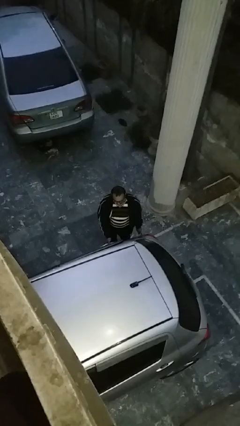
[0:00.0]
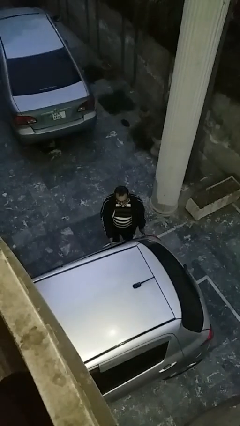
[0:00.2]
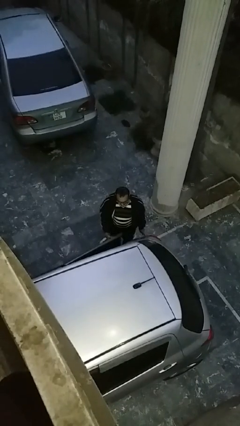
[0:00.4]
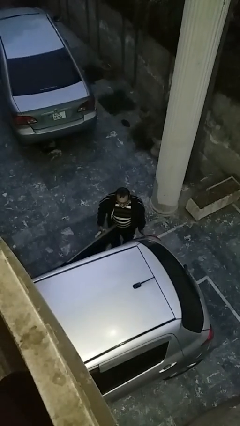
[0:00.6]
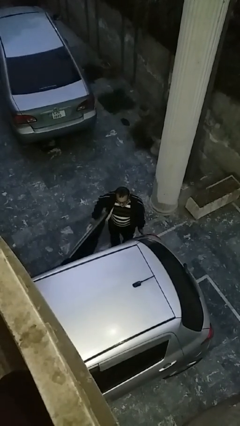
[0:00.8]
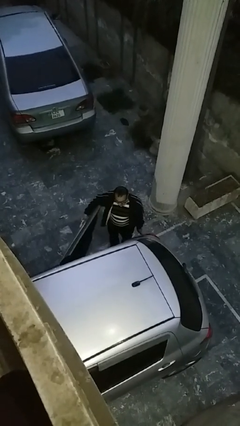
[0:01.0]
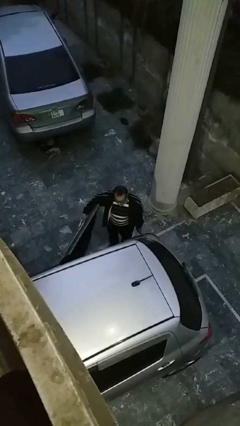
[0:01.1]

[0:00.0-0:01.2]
person opens car door

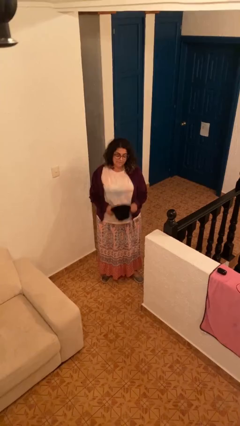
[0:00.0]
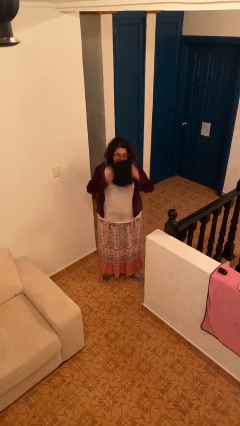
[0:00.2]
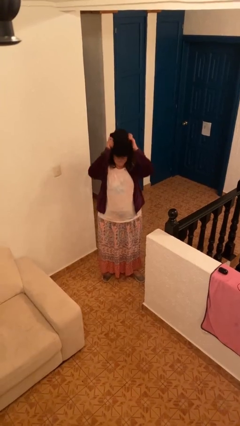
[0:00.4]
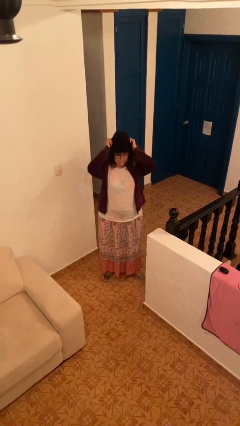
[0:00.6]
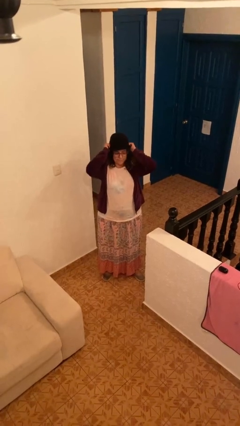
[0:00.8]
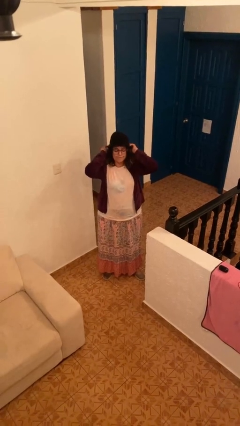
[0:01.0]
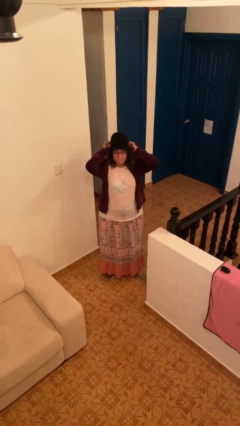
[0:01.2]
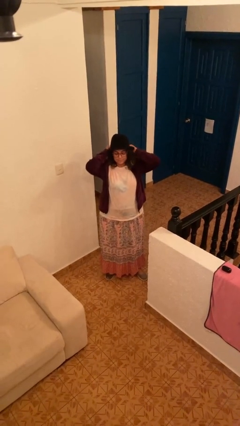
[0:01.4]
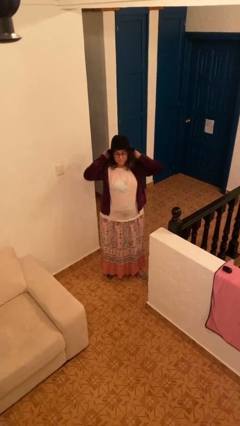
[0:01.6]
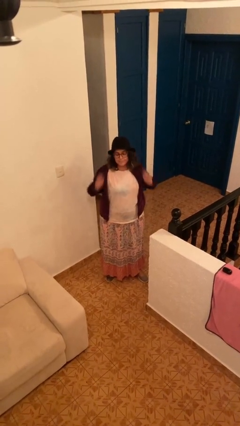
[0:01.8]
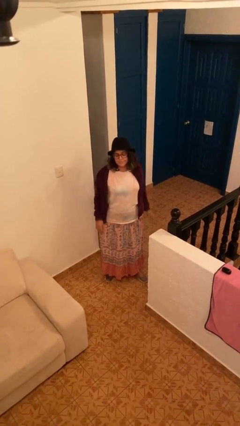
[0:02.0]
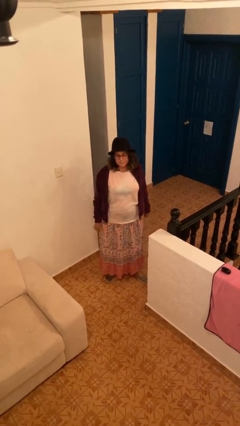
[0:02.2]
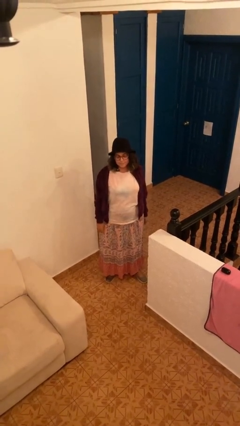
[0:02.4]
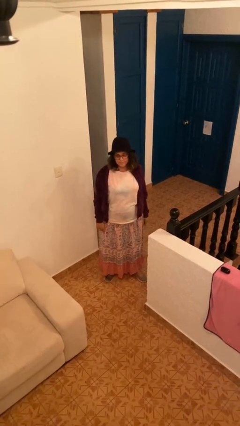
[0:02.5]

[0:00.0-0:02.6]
person puts on hat

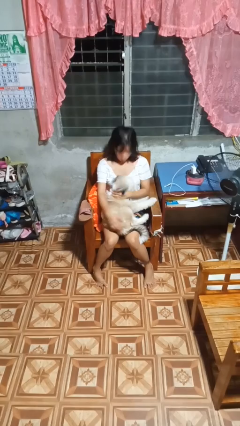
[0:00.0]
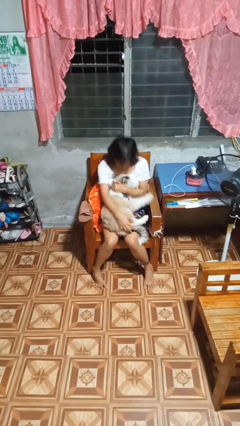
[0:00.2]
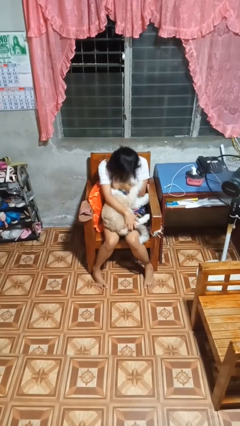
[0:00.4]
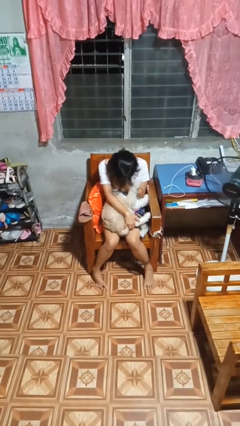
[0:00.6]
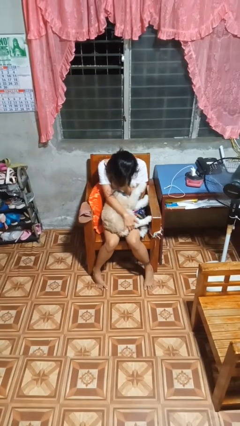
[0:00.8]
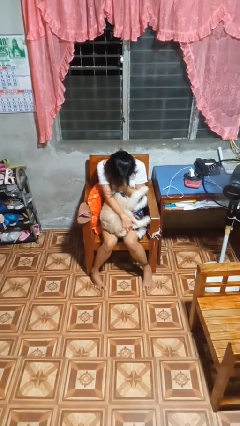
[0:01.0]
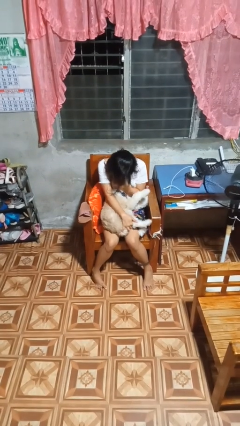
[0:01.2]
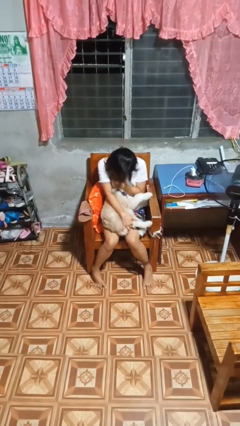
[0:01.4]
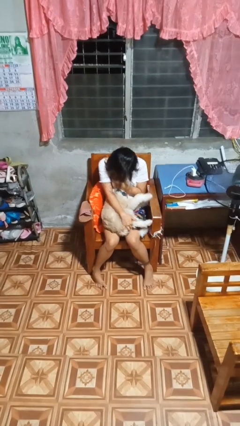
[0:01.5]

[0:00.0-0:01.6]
person hugs dog

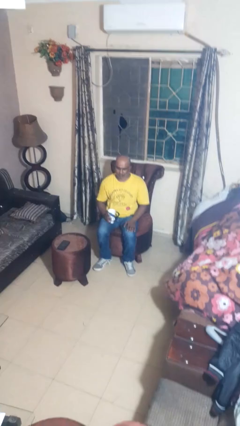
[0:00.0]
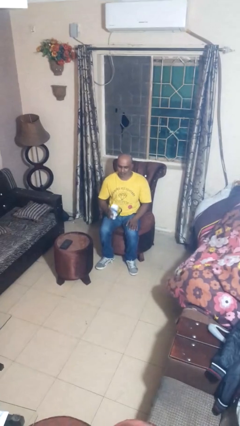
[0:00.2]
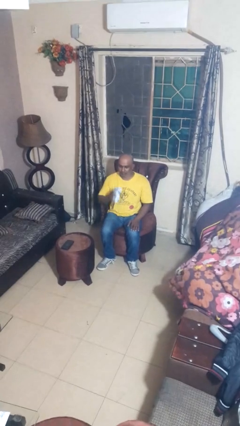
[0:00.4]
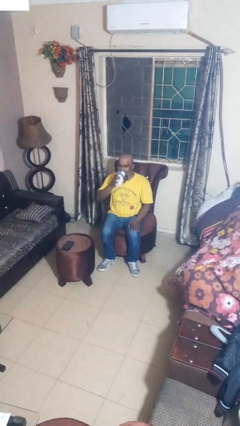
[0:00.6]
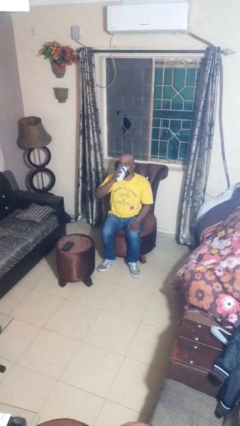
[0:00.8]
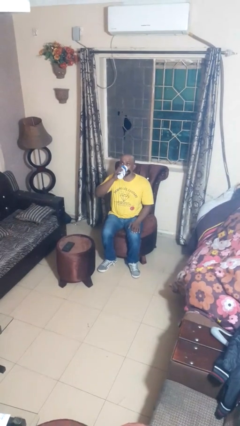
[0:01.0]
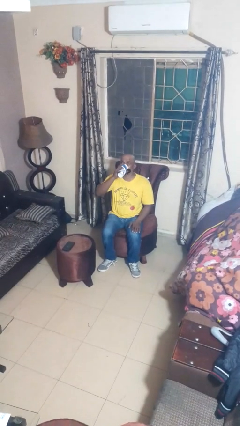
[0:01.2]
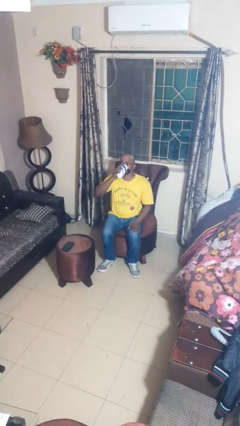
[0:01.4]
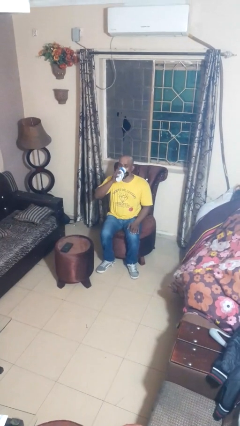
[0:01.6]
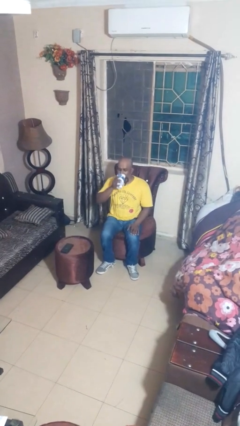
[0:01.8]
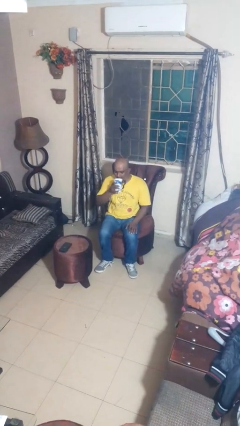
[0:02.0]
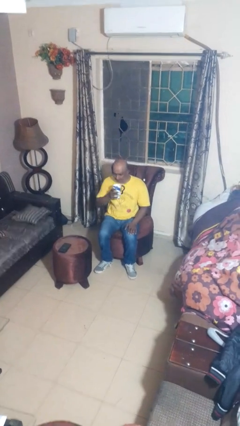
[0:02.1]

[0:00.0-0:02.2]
person drinks from mug

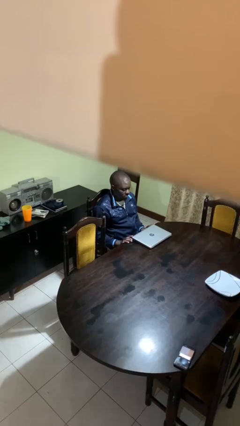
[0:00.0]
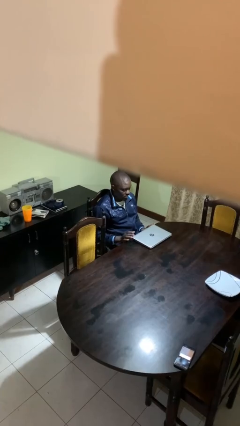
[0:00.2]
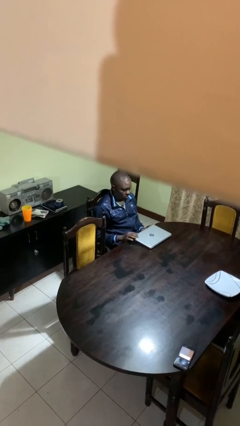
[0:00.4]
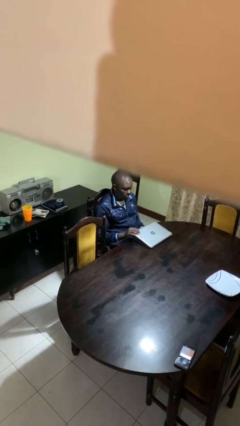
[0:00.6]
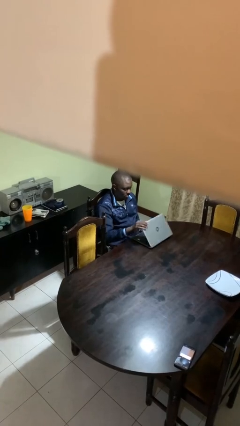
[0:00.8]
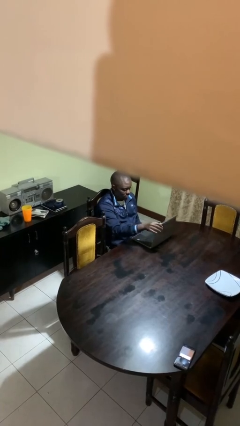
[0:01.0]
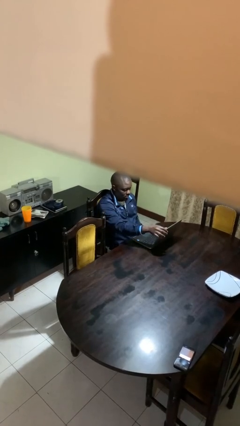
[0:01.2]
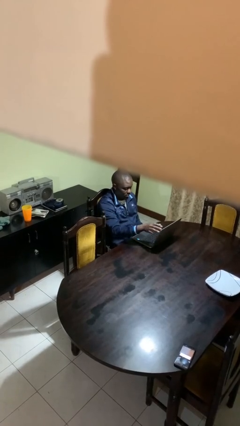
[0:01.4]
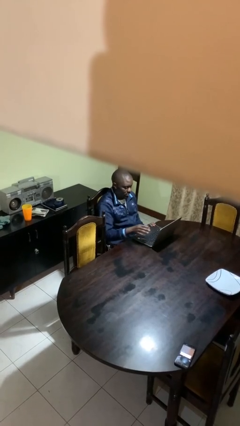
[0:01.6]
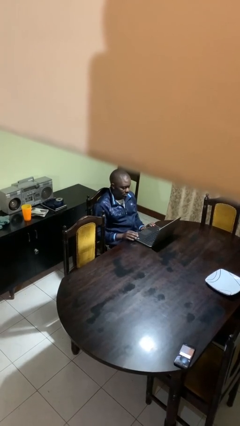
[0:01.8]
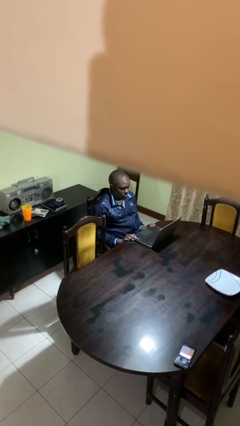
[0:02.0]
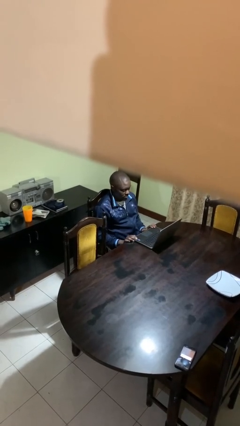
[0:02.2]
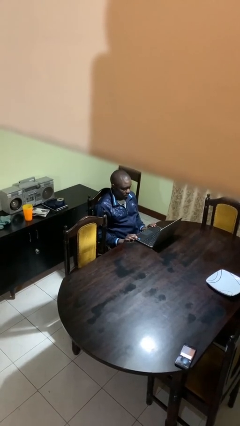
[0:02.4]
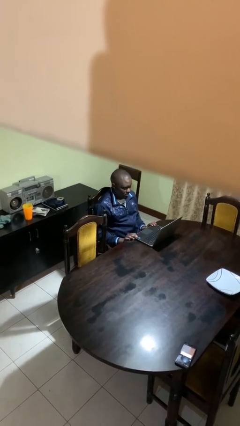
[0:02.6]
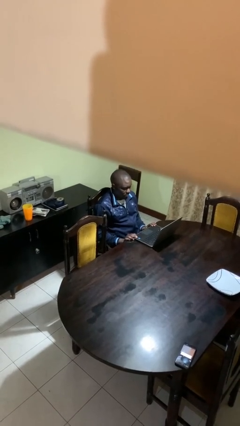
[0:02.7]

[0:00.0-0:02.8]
person opens laptop

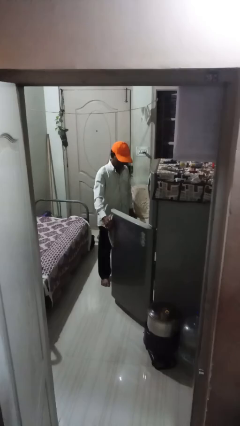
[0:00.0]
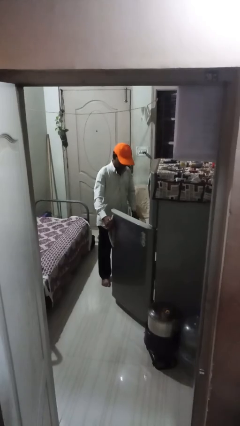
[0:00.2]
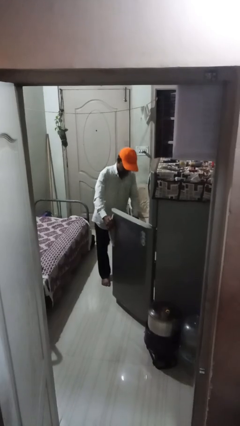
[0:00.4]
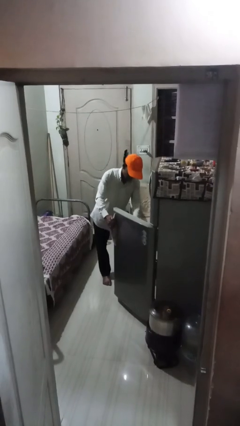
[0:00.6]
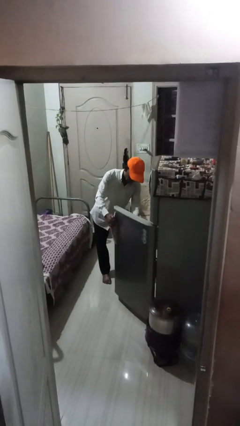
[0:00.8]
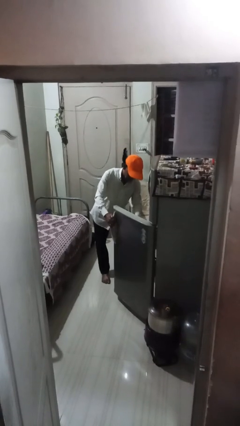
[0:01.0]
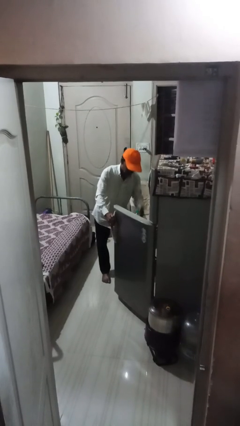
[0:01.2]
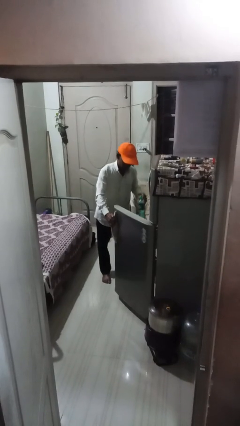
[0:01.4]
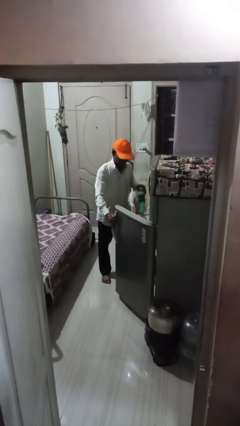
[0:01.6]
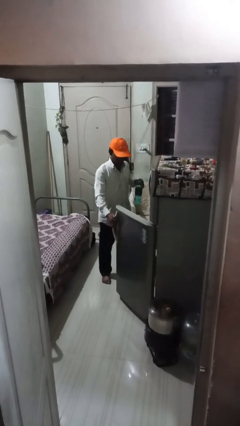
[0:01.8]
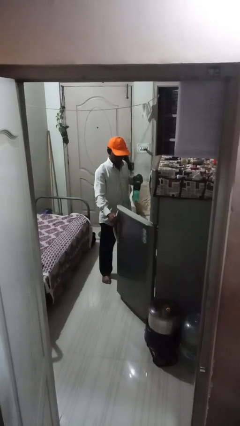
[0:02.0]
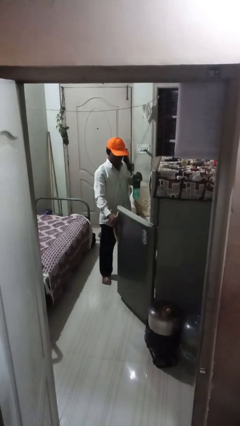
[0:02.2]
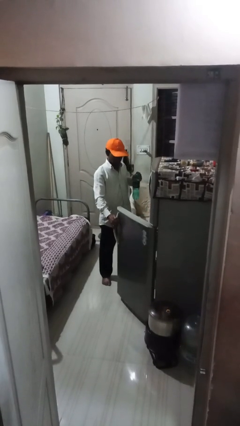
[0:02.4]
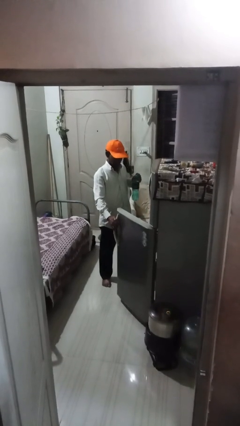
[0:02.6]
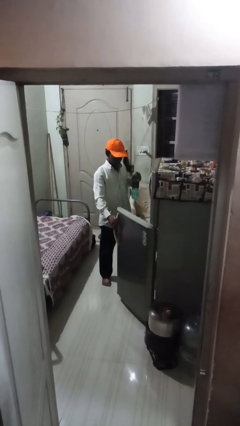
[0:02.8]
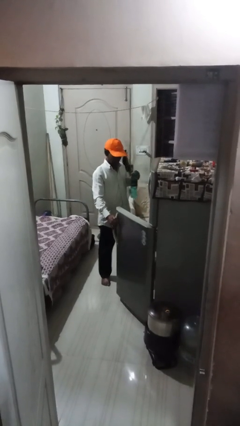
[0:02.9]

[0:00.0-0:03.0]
person takes object from refrigerator

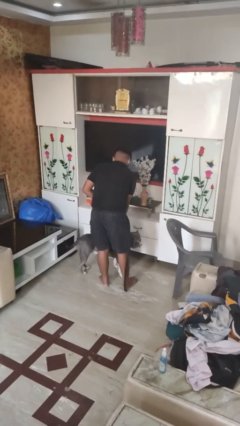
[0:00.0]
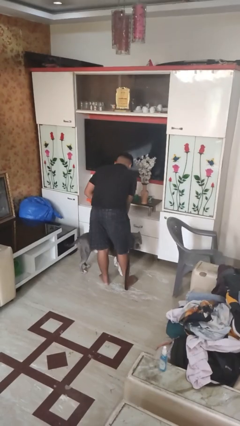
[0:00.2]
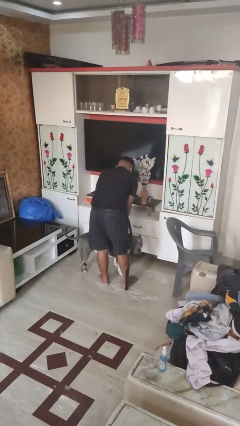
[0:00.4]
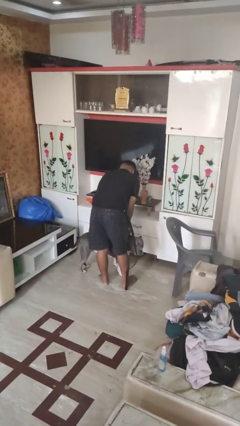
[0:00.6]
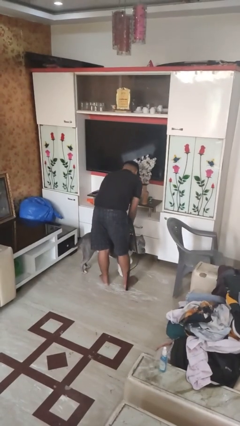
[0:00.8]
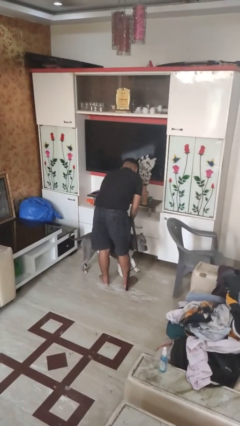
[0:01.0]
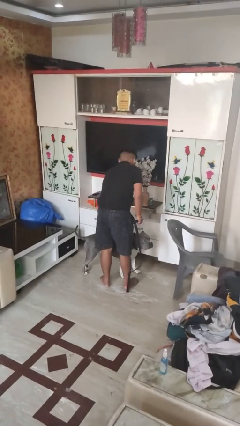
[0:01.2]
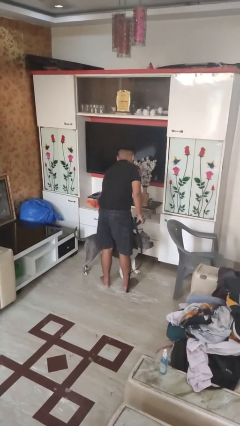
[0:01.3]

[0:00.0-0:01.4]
person unattaches leash from dog

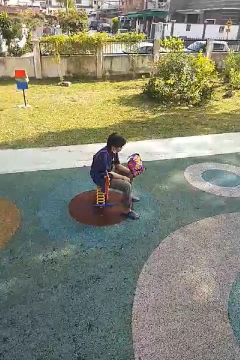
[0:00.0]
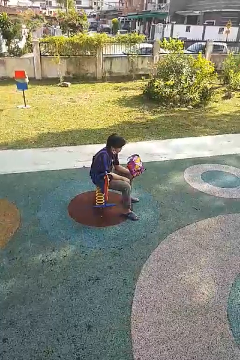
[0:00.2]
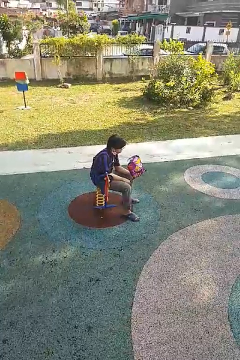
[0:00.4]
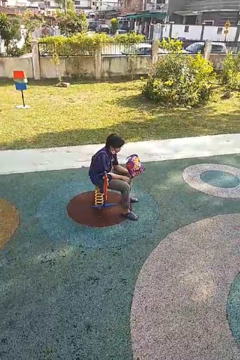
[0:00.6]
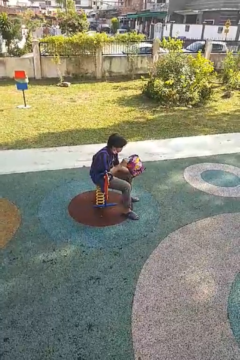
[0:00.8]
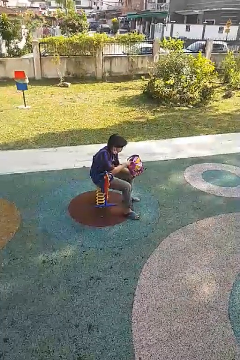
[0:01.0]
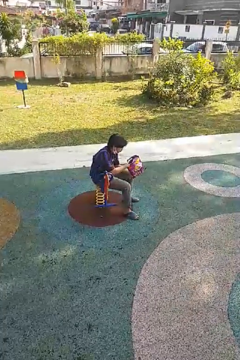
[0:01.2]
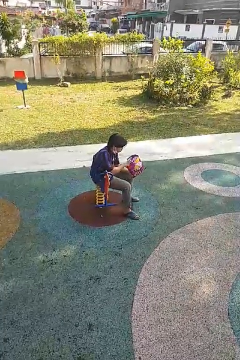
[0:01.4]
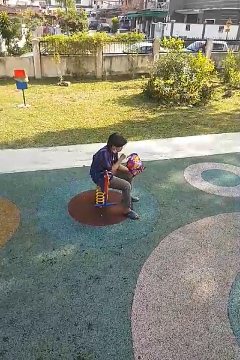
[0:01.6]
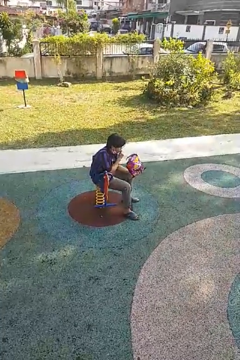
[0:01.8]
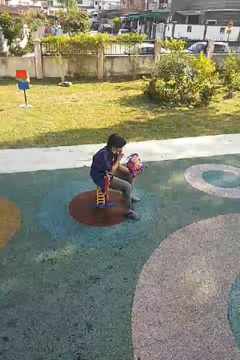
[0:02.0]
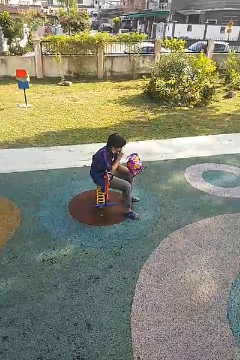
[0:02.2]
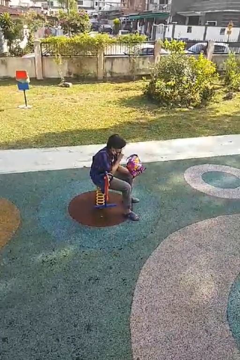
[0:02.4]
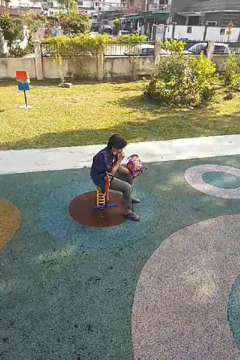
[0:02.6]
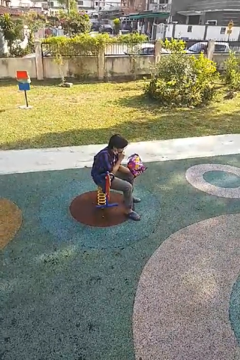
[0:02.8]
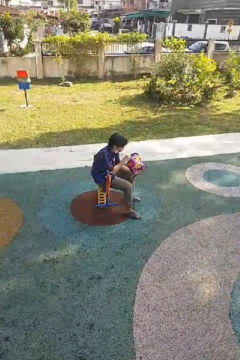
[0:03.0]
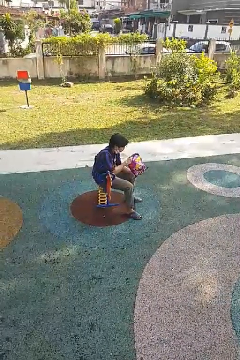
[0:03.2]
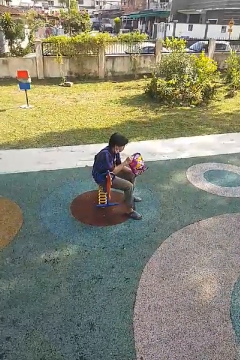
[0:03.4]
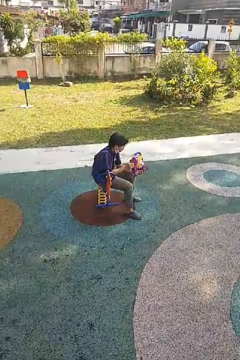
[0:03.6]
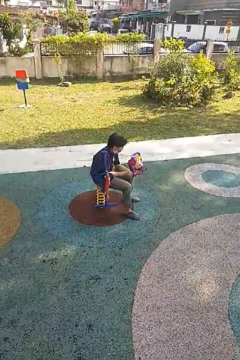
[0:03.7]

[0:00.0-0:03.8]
person eats snack from bag
